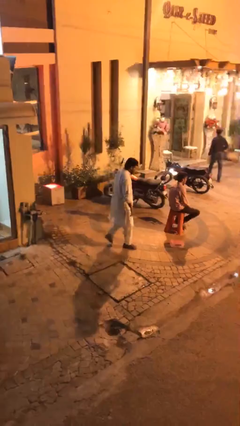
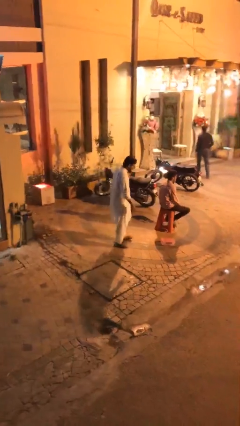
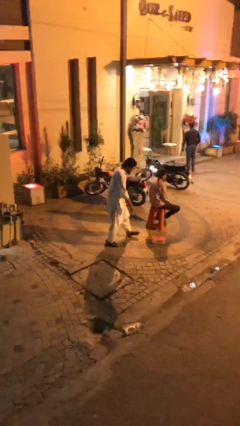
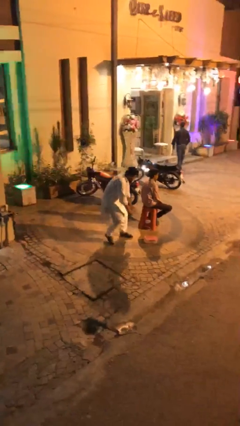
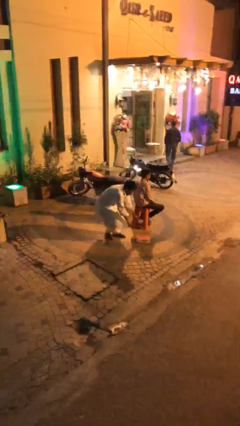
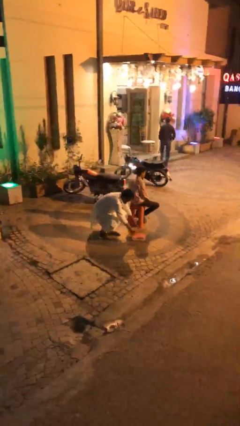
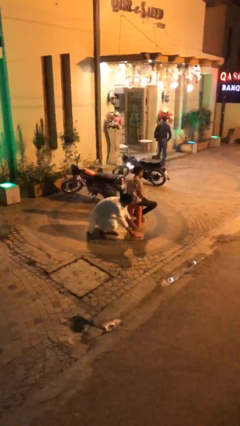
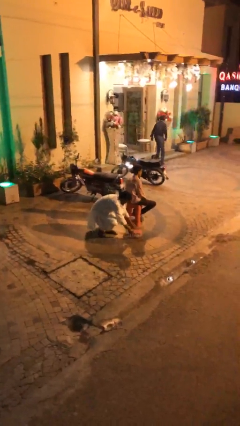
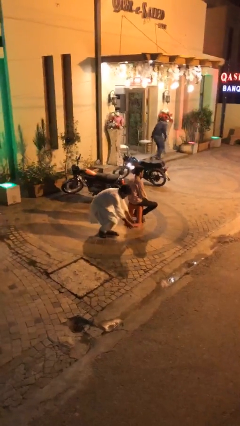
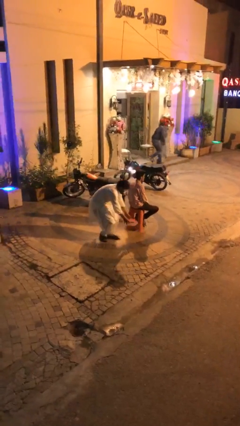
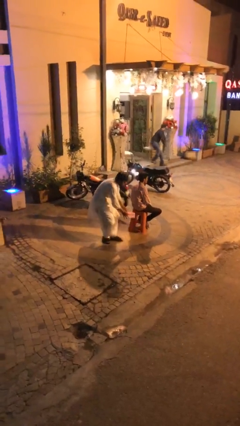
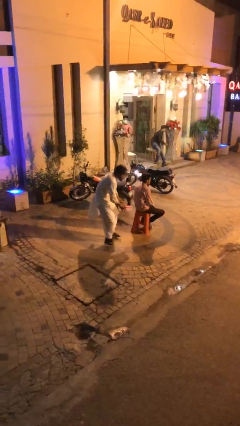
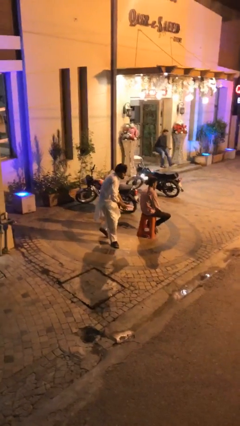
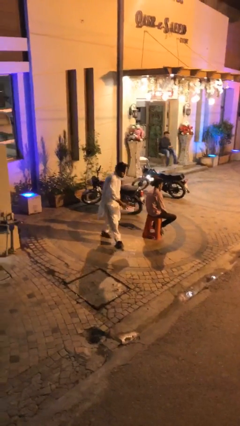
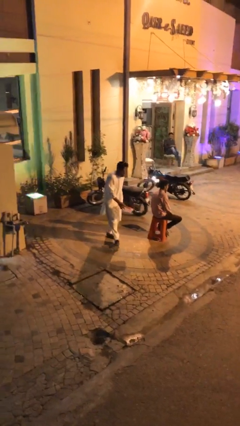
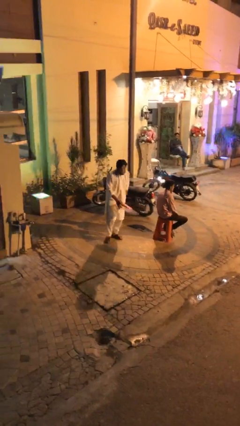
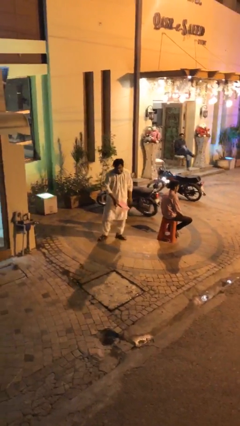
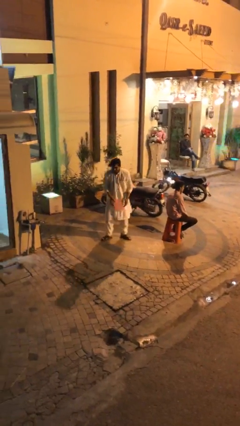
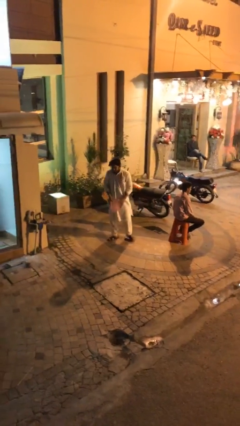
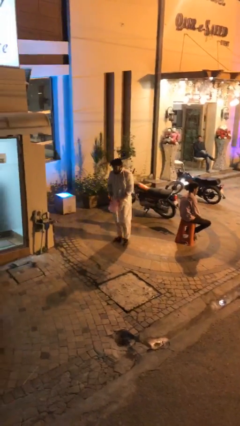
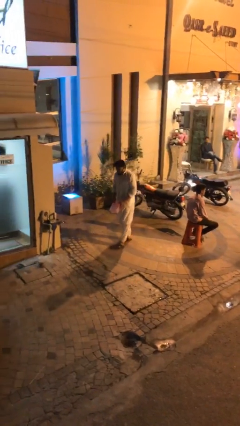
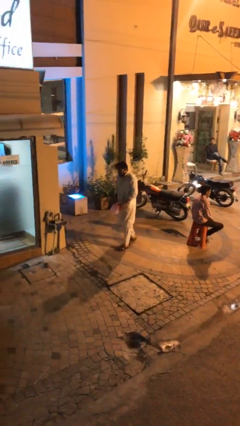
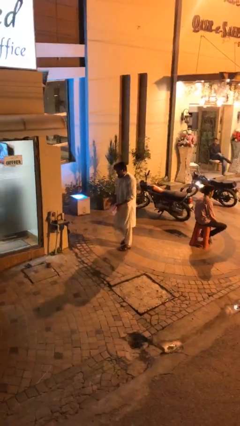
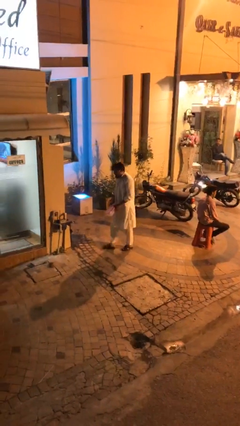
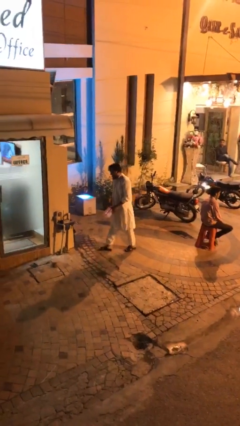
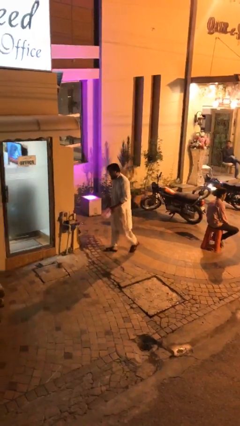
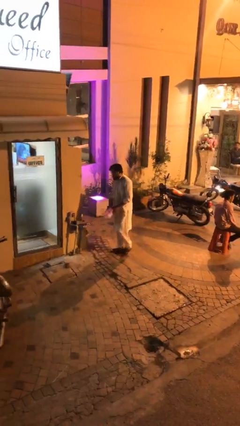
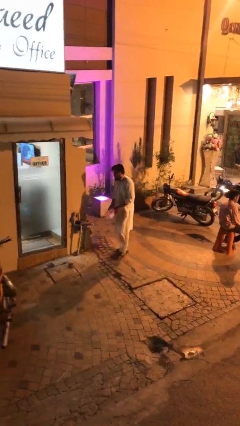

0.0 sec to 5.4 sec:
person steals object from person

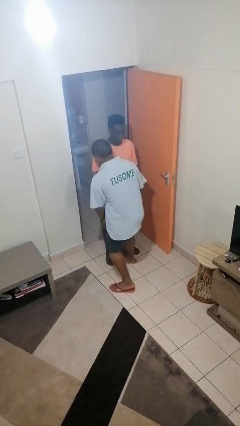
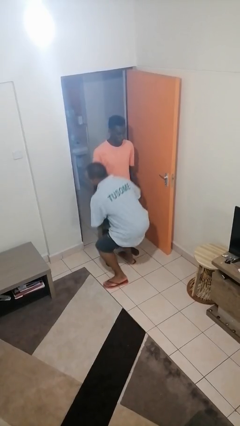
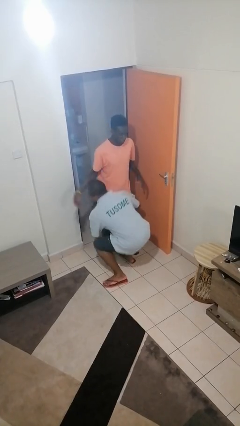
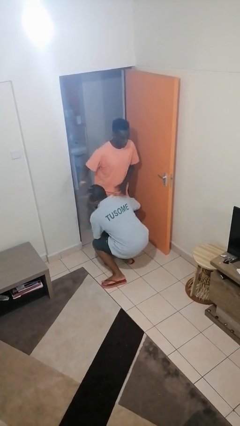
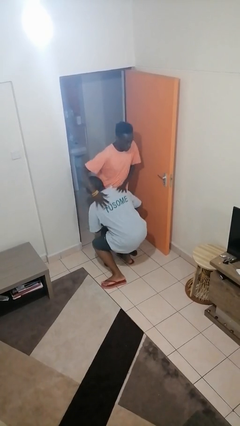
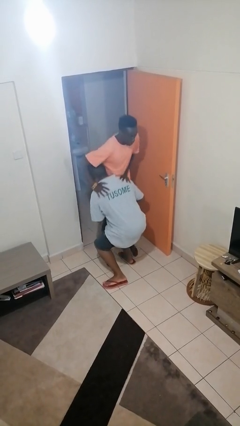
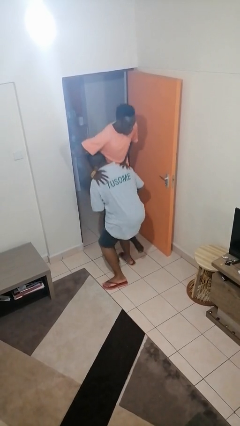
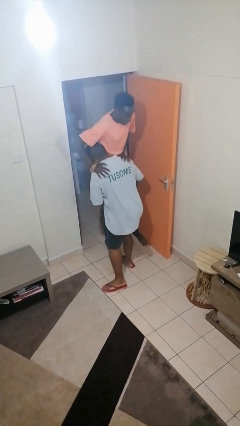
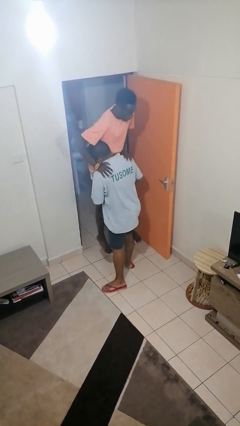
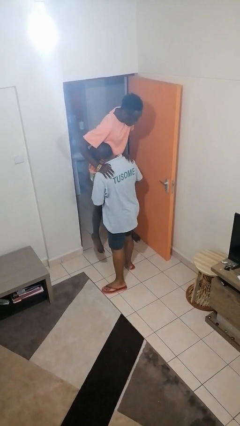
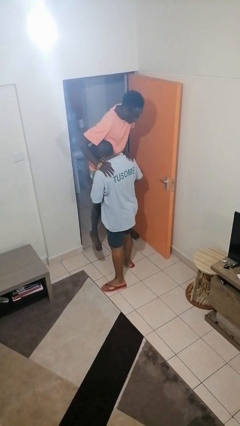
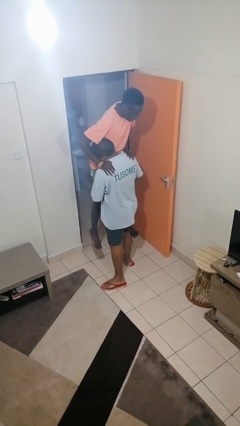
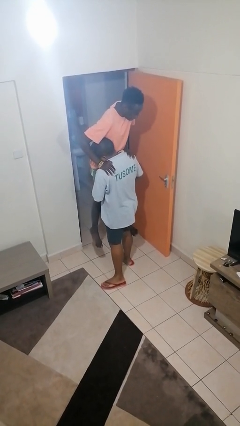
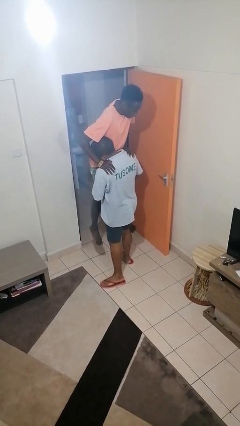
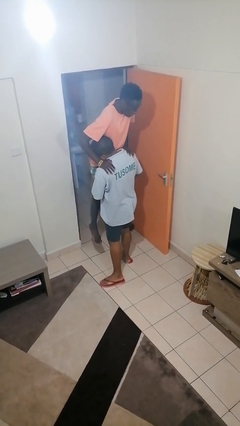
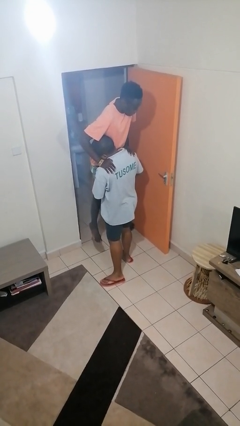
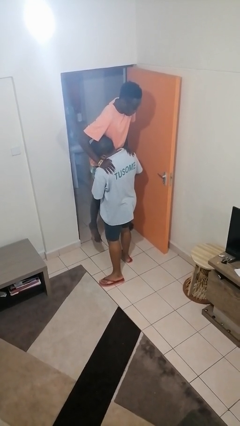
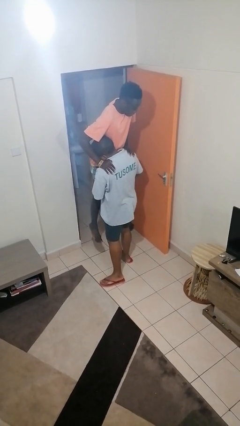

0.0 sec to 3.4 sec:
person carries person over shoulder

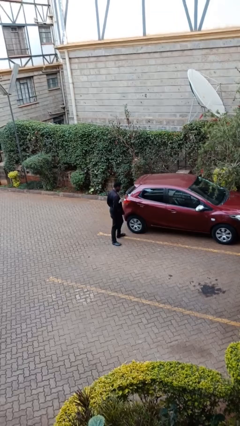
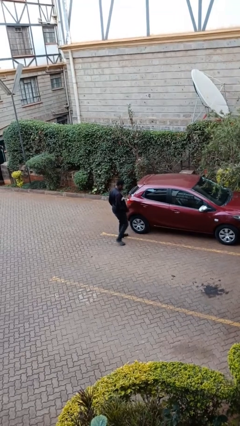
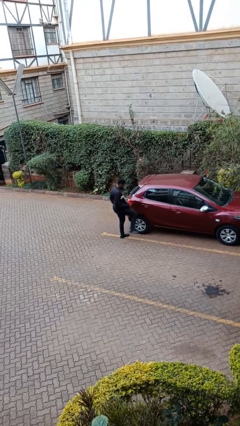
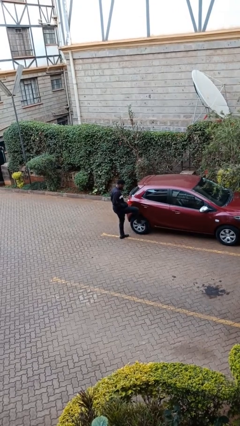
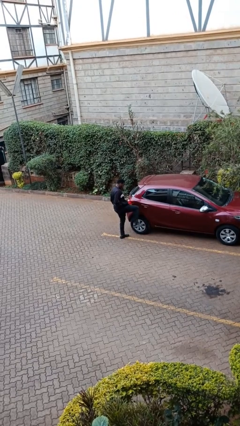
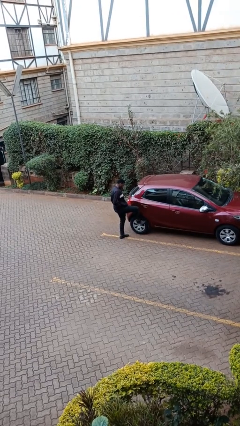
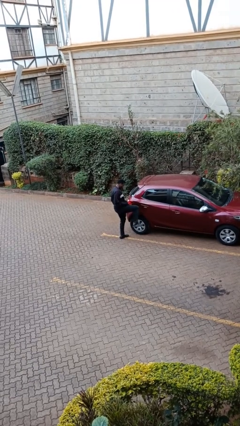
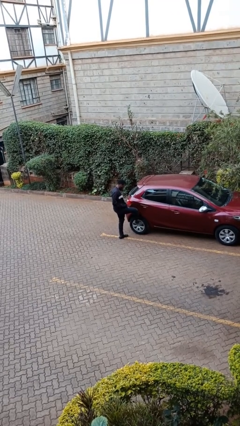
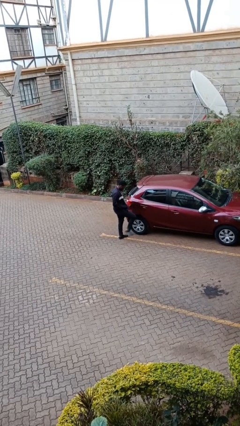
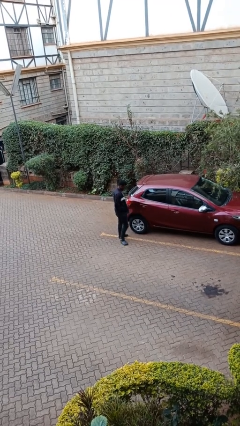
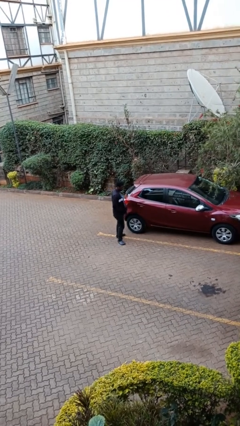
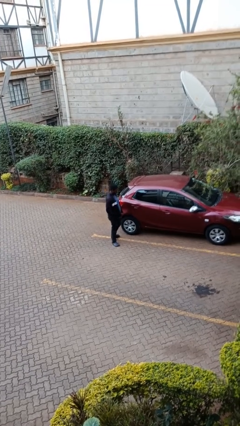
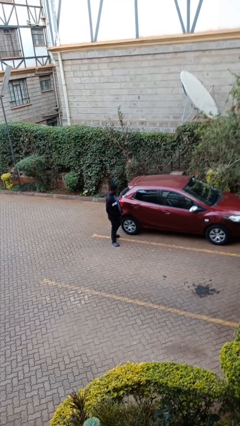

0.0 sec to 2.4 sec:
person kicks car tires

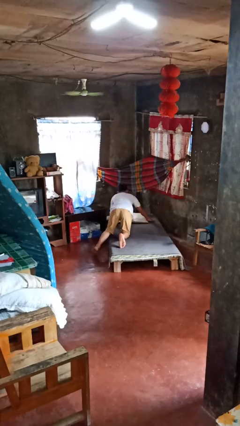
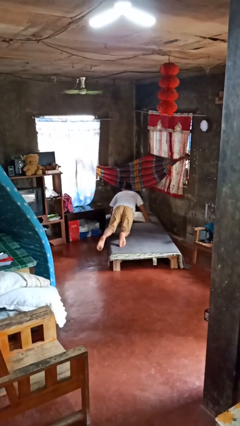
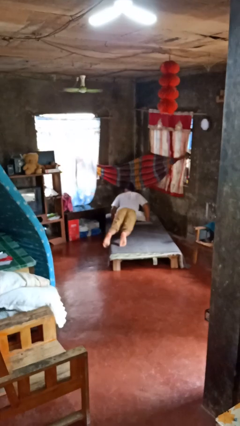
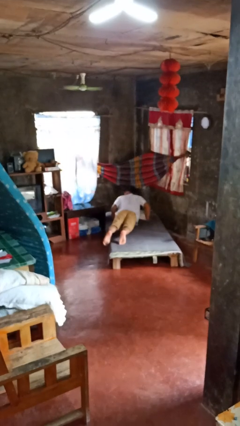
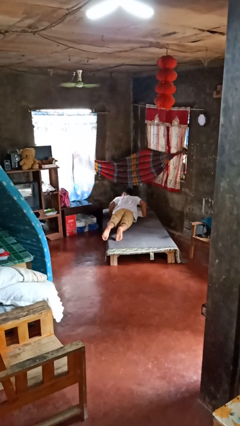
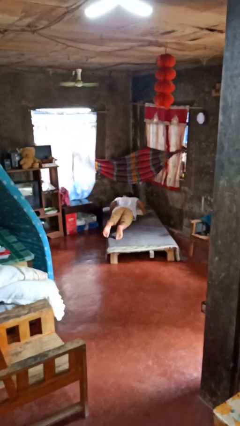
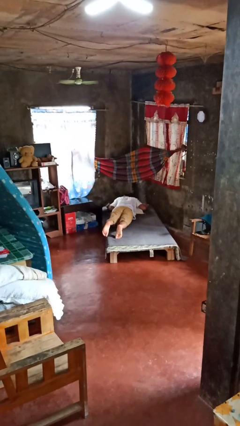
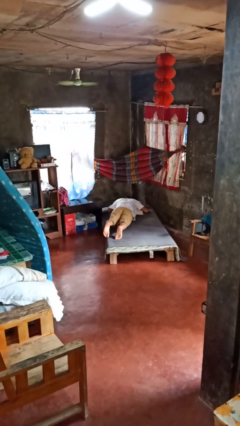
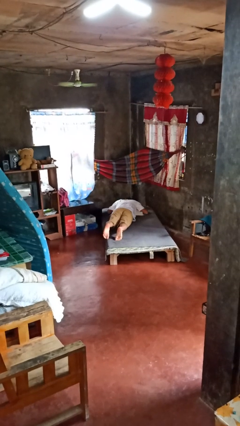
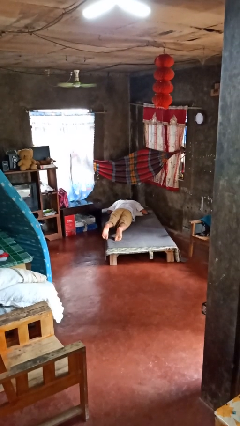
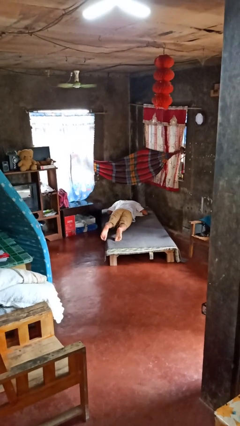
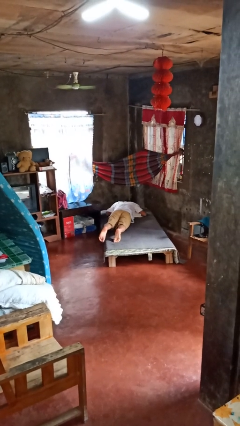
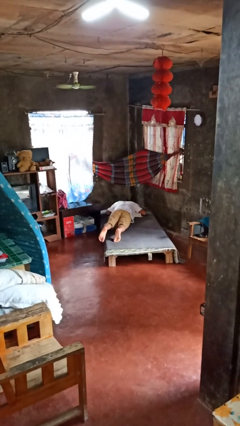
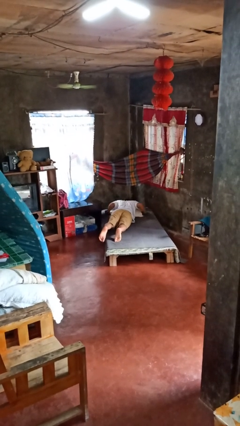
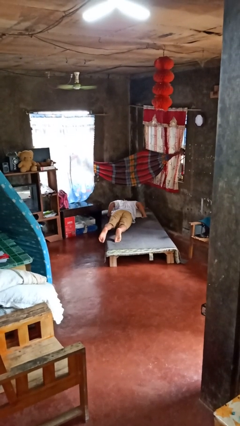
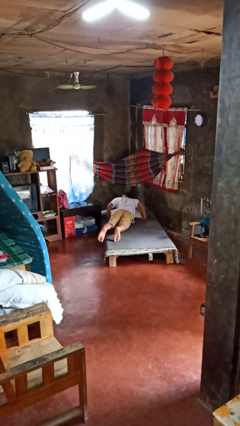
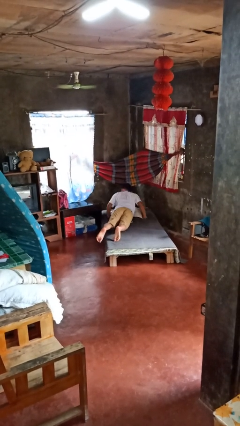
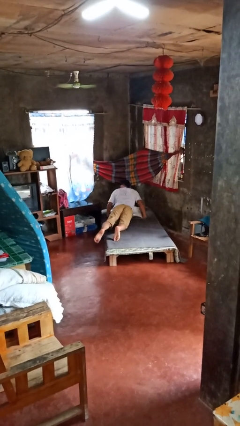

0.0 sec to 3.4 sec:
person lies down on bed

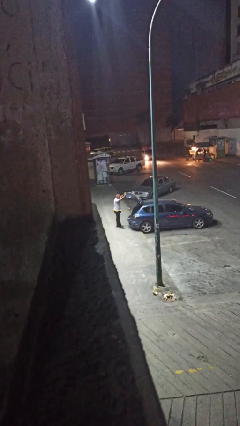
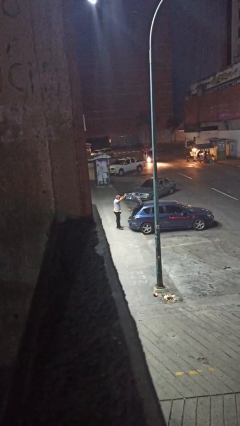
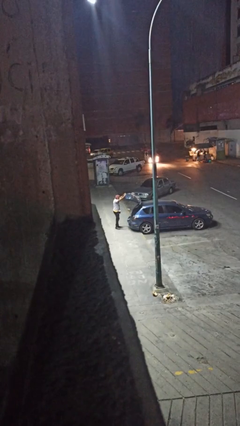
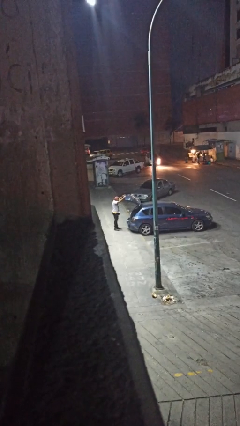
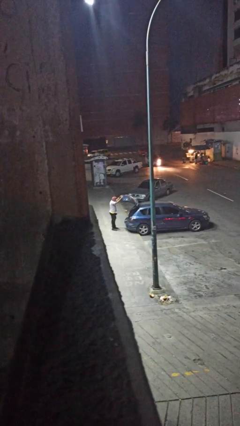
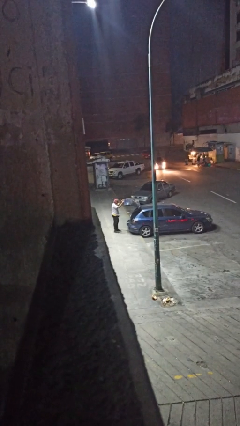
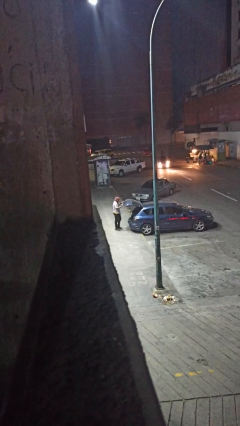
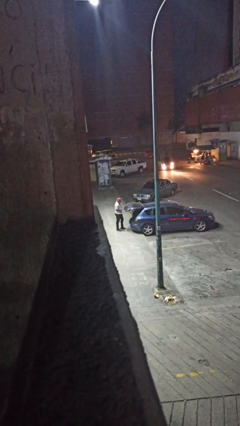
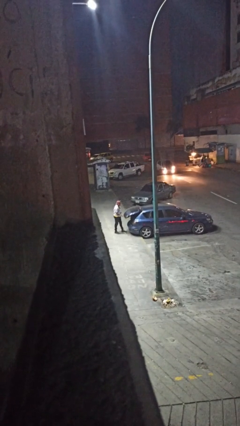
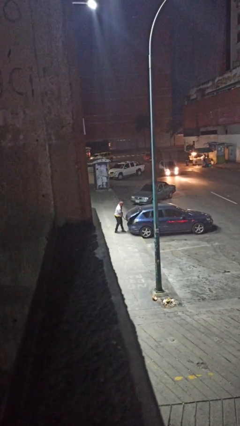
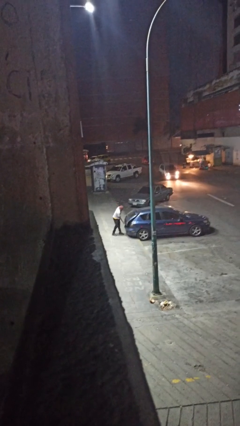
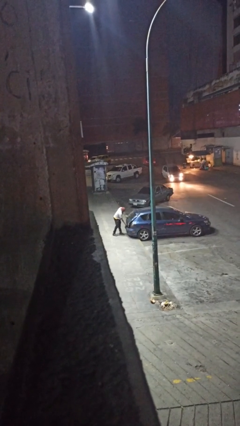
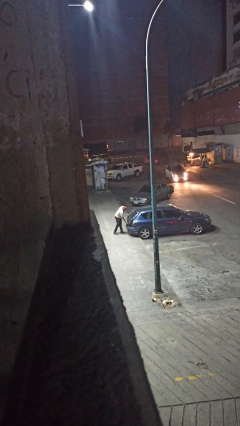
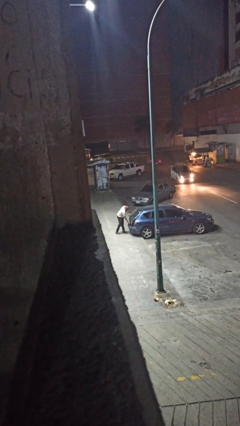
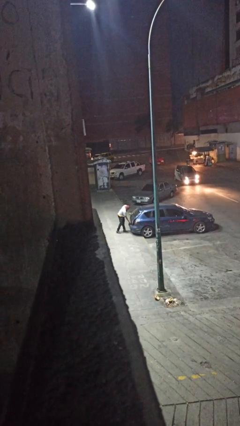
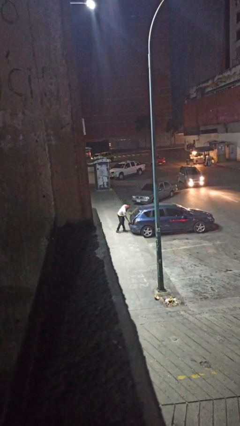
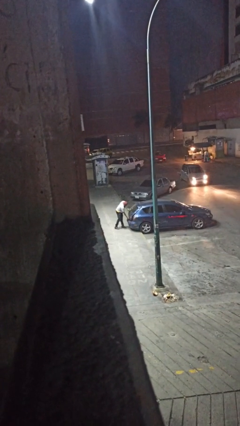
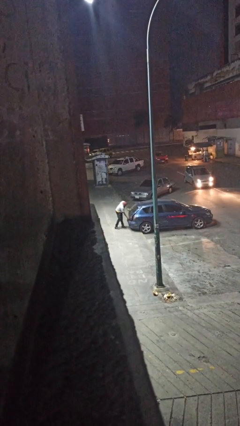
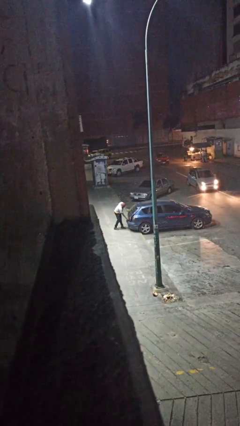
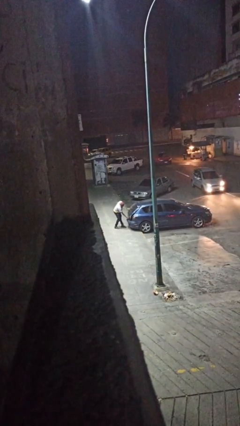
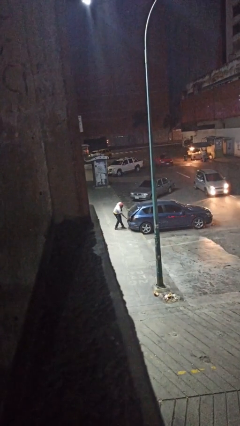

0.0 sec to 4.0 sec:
person closes car trunk
